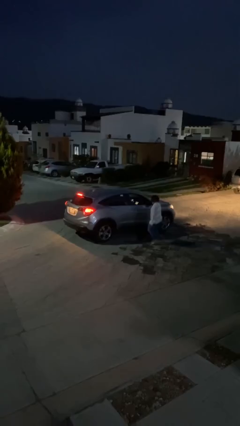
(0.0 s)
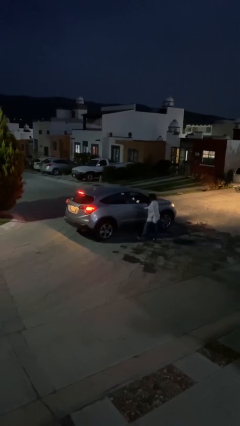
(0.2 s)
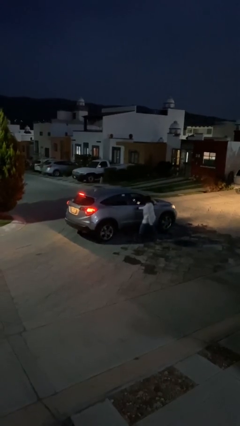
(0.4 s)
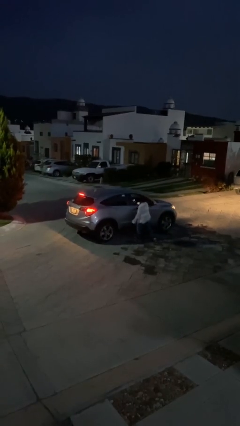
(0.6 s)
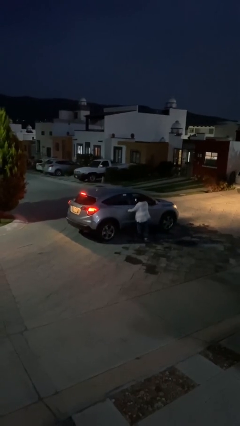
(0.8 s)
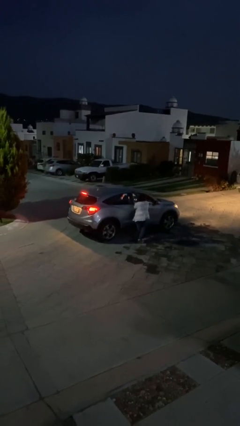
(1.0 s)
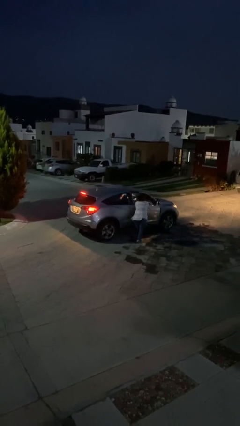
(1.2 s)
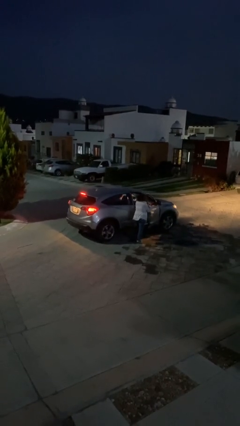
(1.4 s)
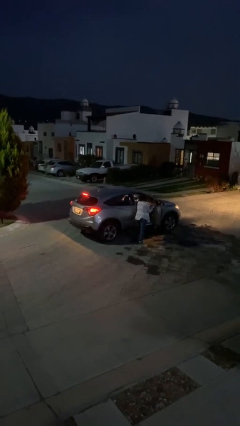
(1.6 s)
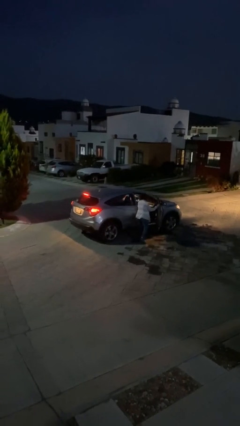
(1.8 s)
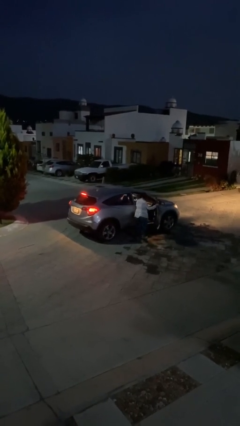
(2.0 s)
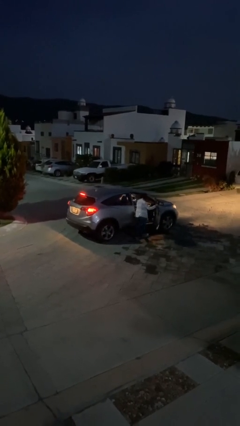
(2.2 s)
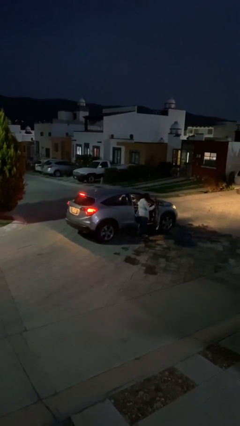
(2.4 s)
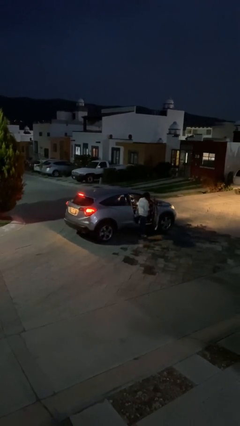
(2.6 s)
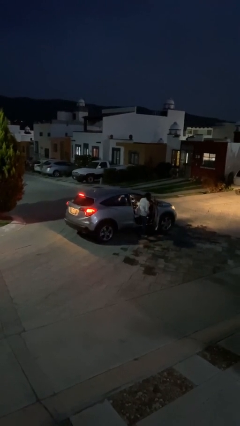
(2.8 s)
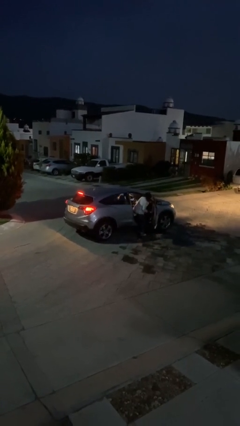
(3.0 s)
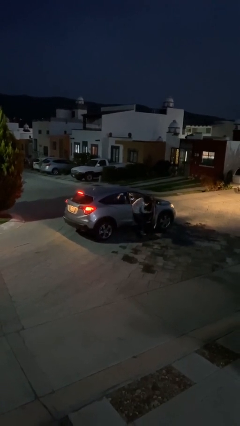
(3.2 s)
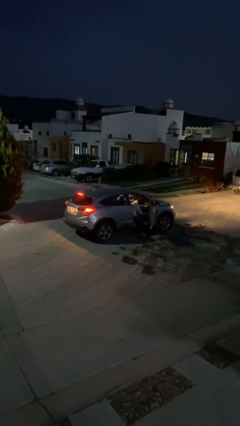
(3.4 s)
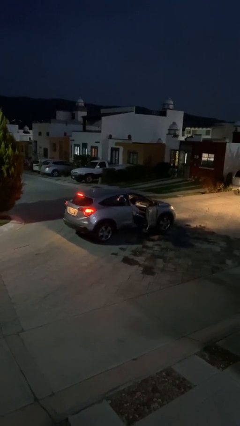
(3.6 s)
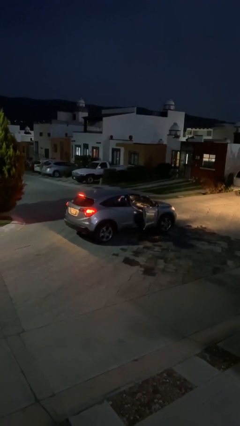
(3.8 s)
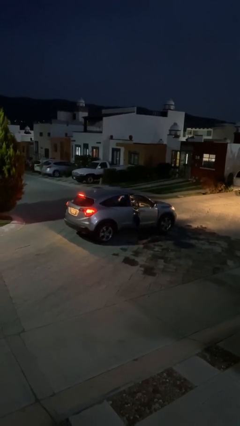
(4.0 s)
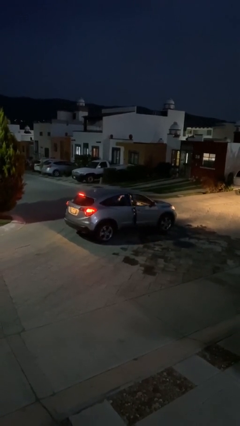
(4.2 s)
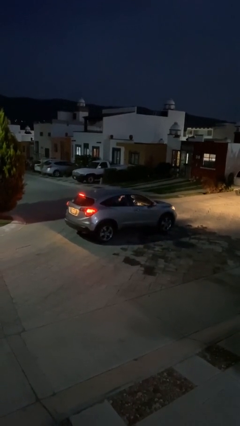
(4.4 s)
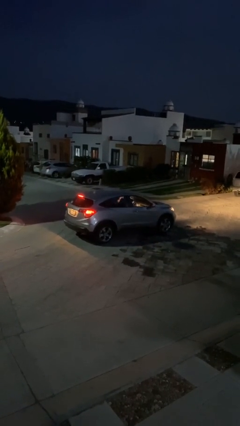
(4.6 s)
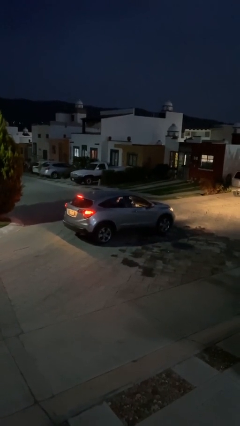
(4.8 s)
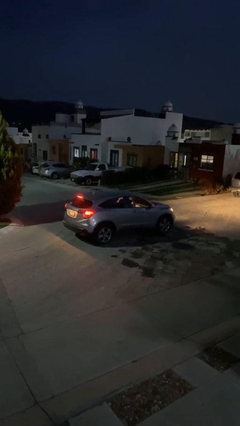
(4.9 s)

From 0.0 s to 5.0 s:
car picks up person

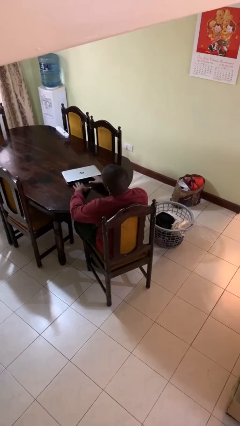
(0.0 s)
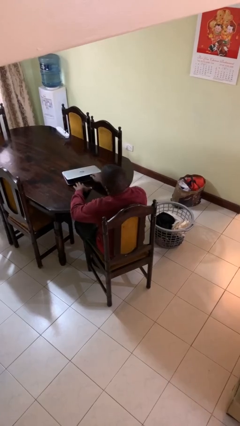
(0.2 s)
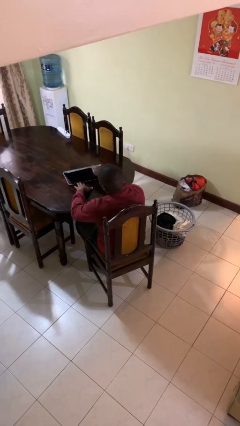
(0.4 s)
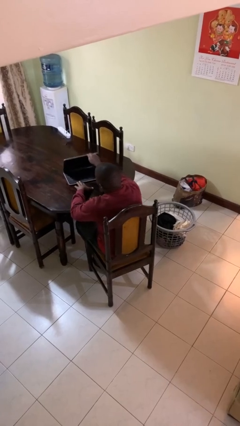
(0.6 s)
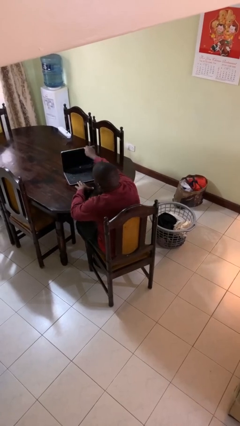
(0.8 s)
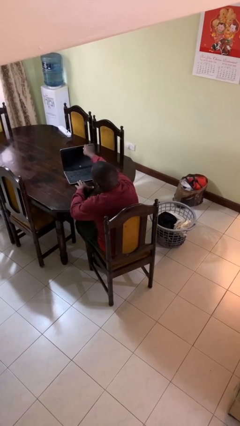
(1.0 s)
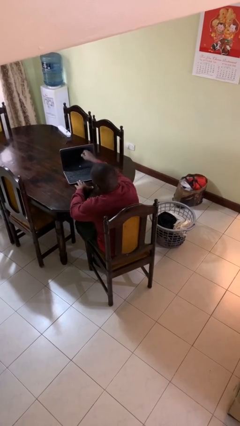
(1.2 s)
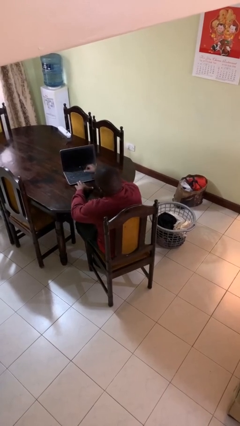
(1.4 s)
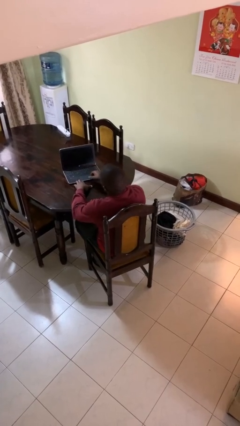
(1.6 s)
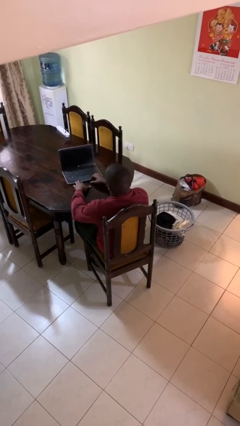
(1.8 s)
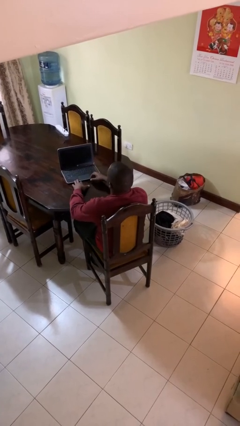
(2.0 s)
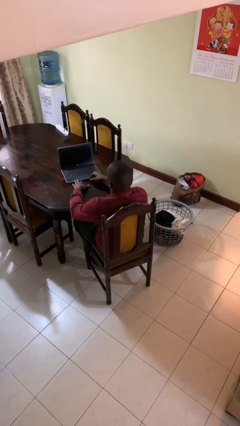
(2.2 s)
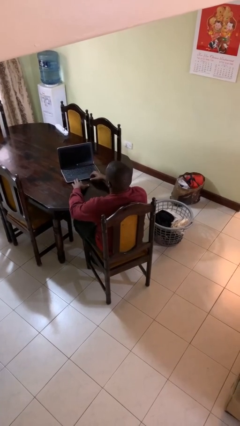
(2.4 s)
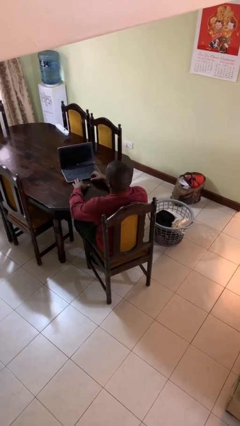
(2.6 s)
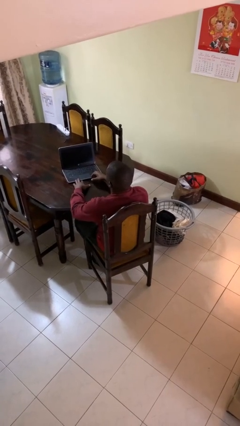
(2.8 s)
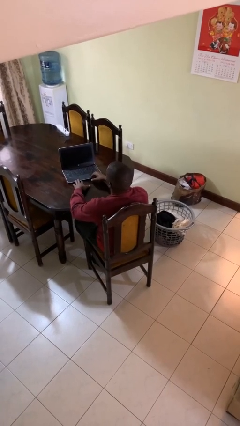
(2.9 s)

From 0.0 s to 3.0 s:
person opens laptop

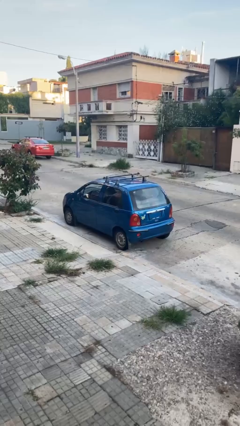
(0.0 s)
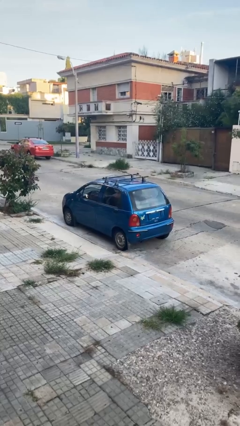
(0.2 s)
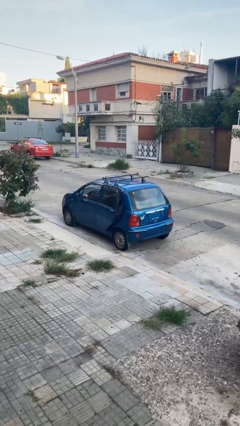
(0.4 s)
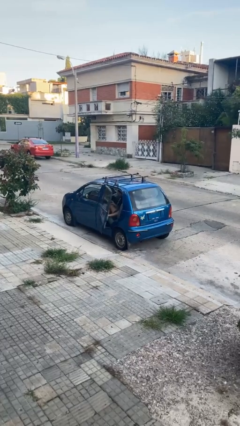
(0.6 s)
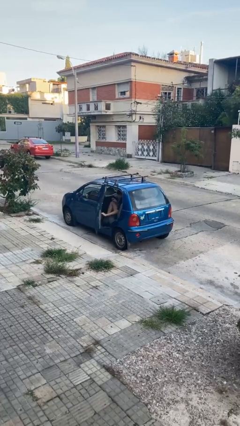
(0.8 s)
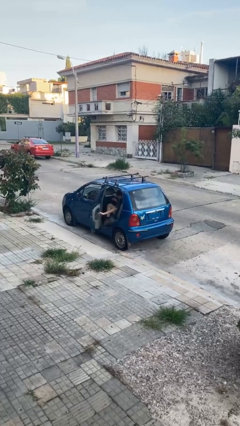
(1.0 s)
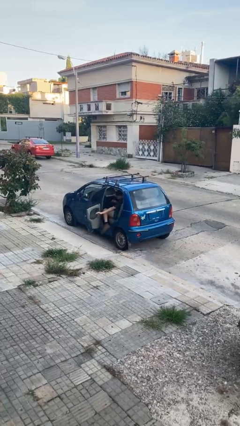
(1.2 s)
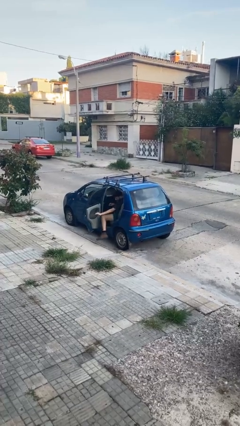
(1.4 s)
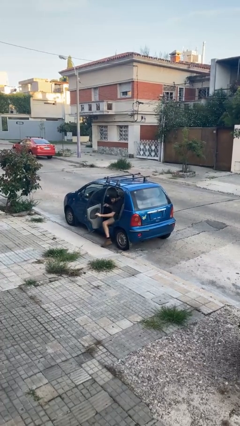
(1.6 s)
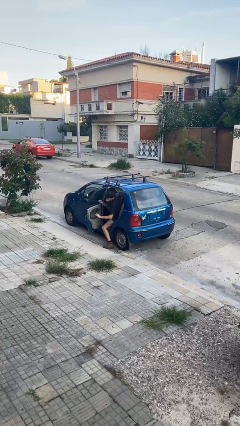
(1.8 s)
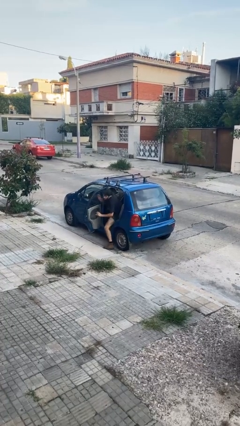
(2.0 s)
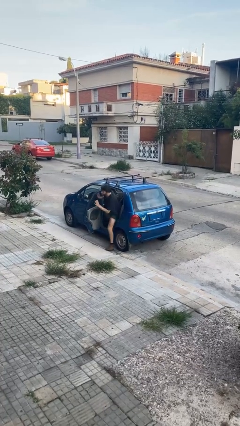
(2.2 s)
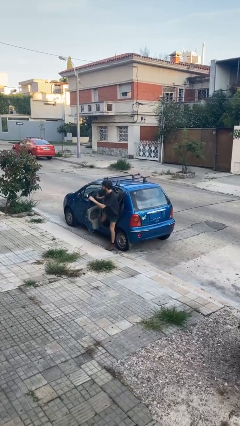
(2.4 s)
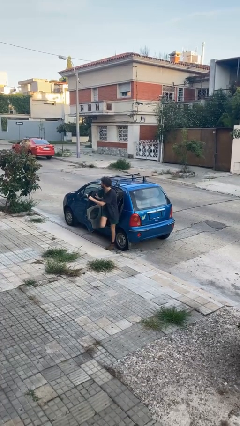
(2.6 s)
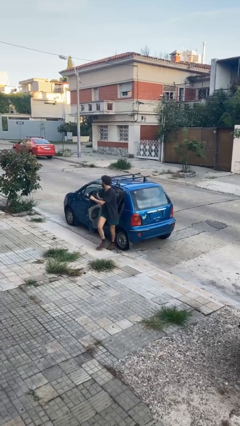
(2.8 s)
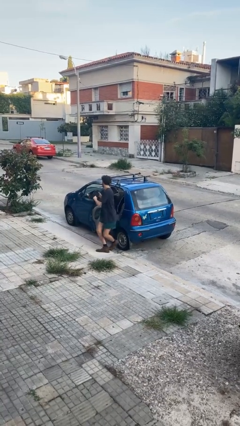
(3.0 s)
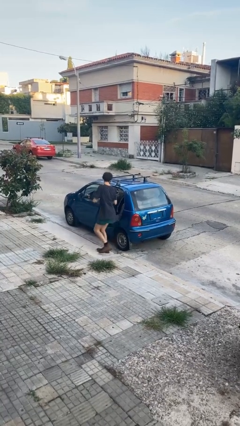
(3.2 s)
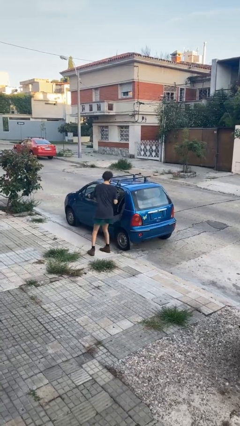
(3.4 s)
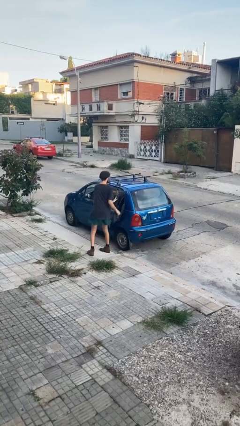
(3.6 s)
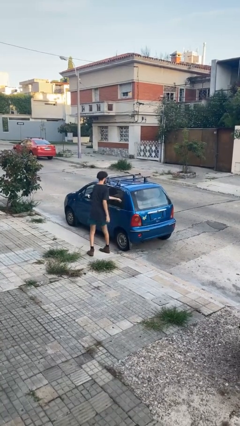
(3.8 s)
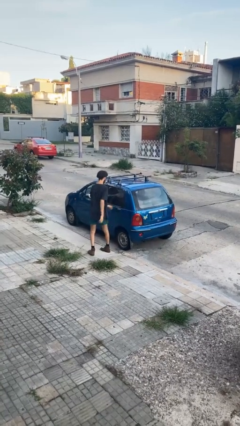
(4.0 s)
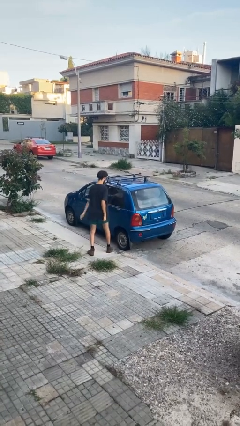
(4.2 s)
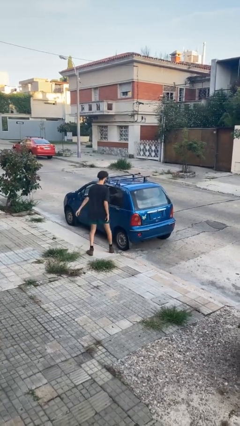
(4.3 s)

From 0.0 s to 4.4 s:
car drops off person
